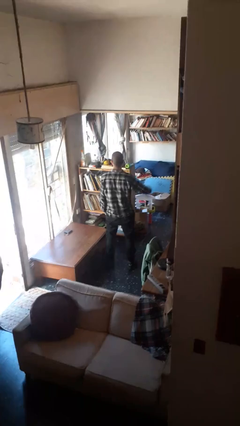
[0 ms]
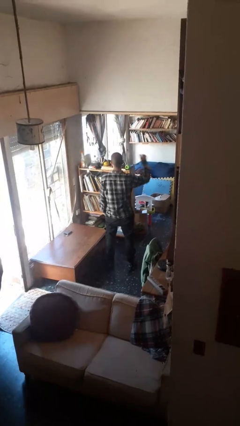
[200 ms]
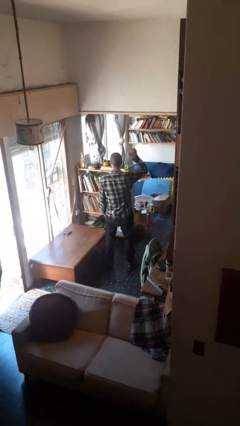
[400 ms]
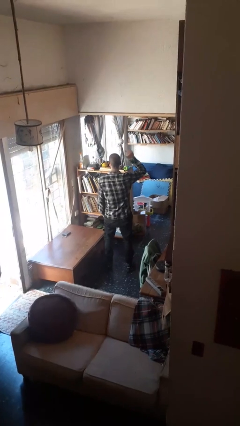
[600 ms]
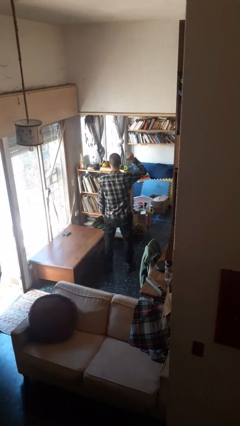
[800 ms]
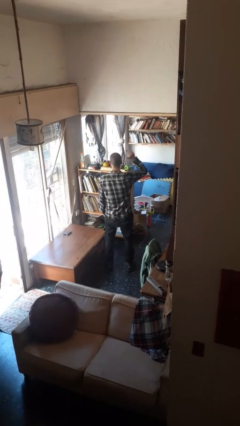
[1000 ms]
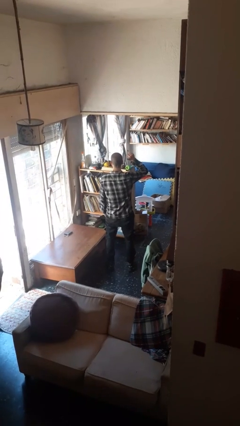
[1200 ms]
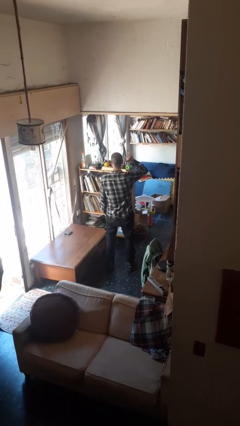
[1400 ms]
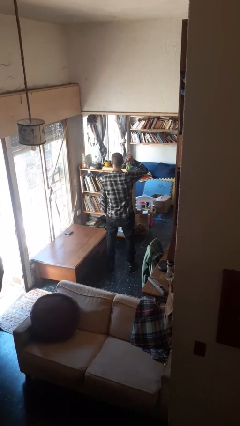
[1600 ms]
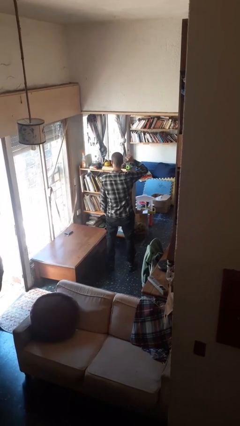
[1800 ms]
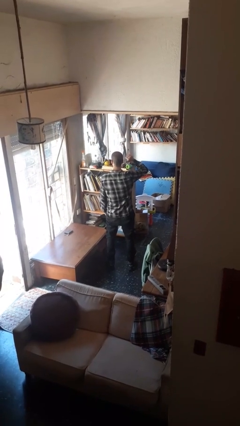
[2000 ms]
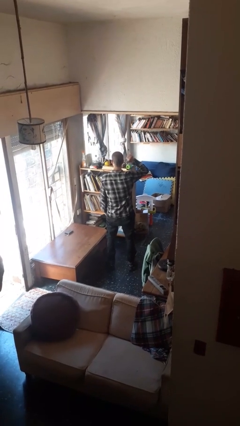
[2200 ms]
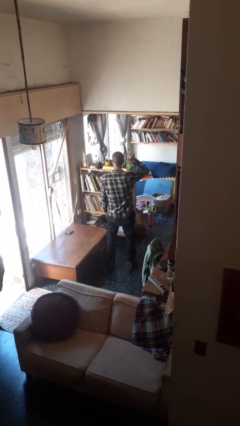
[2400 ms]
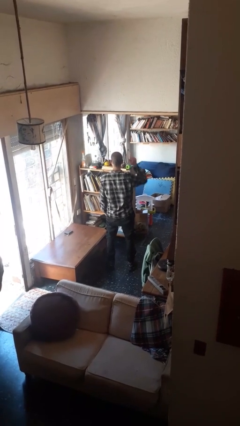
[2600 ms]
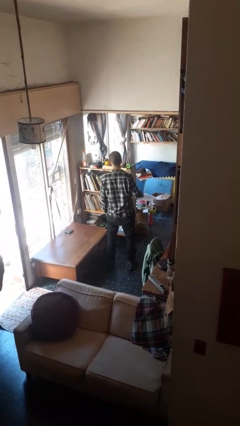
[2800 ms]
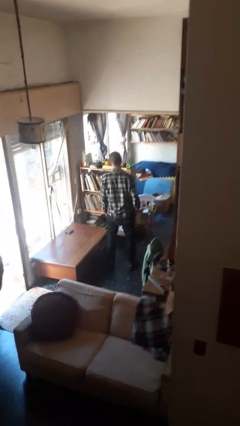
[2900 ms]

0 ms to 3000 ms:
person gestures behind me

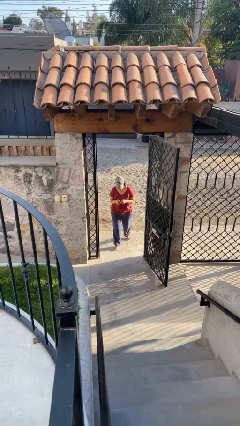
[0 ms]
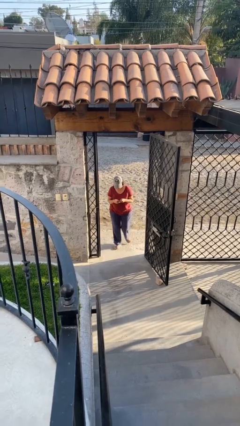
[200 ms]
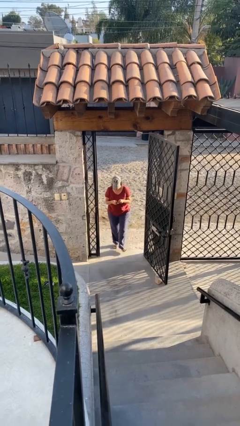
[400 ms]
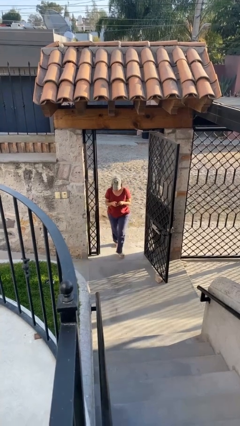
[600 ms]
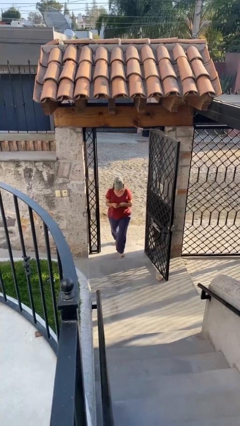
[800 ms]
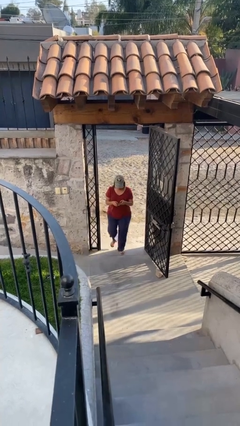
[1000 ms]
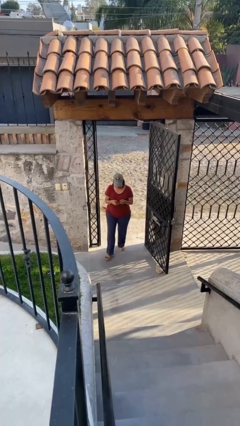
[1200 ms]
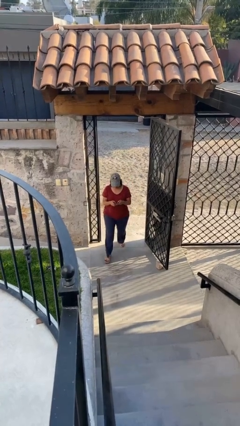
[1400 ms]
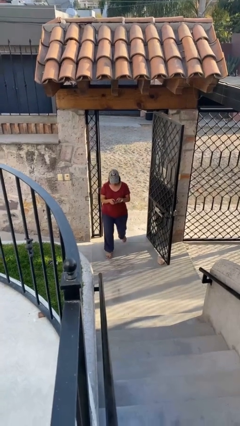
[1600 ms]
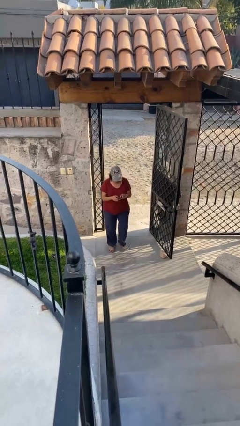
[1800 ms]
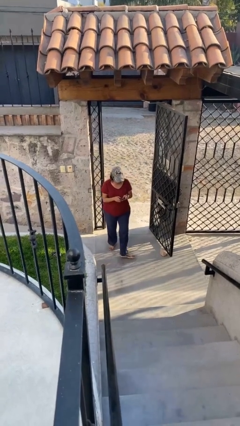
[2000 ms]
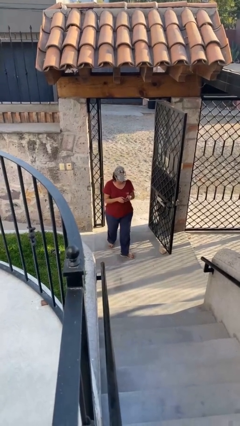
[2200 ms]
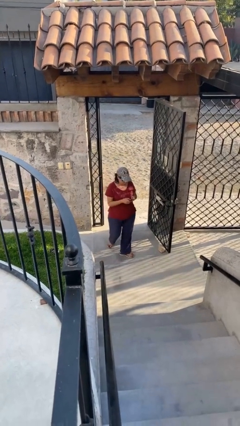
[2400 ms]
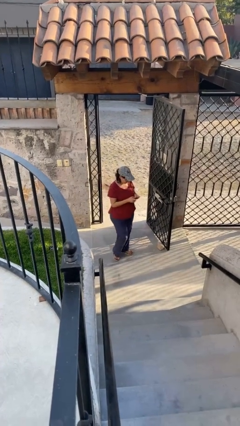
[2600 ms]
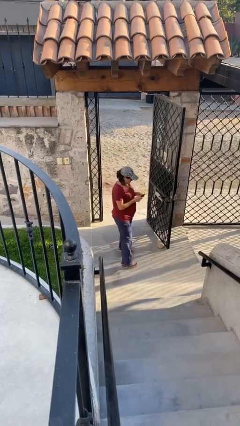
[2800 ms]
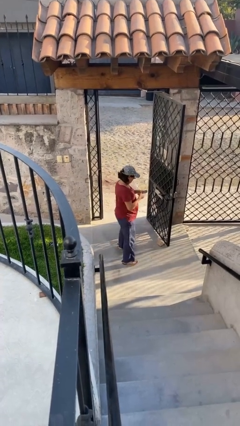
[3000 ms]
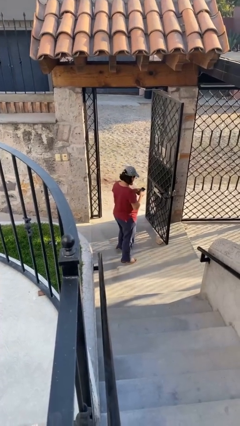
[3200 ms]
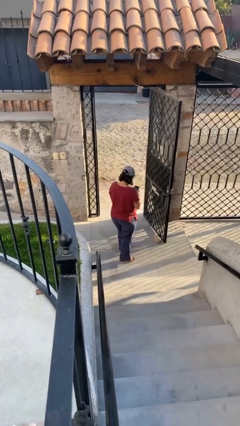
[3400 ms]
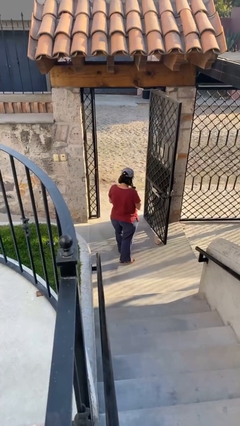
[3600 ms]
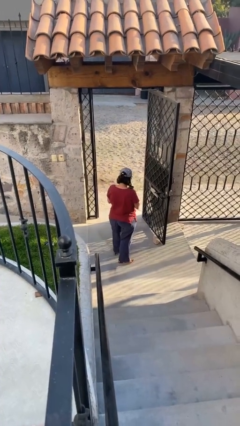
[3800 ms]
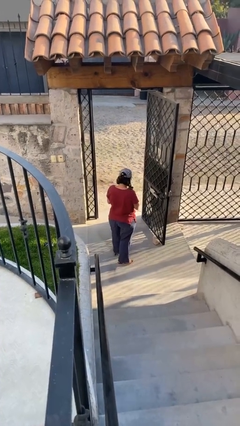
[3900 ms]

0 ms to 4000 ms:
person enters scene through structure

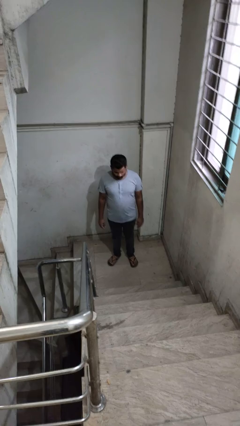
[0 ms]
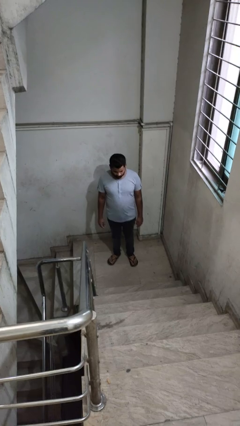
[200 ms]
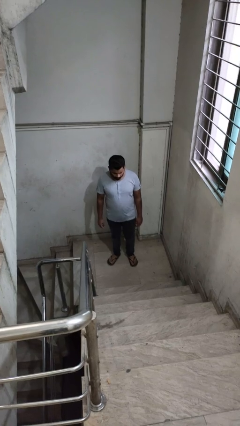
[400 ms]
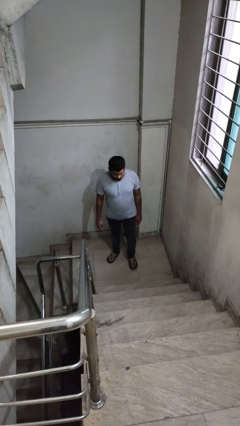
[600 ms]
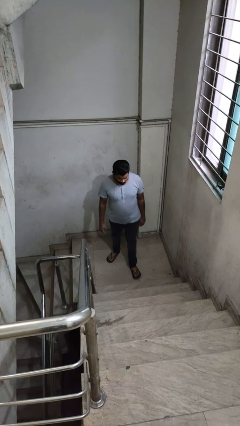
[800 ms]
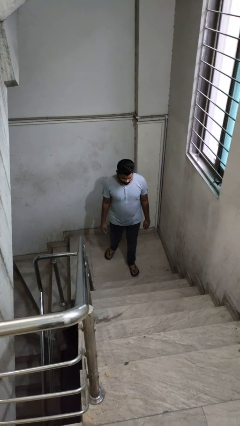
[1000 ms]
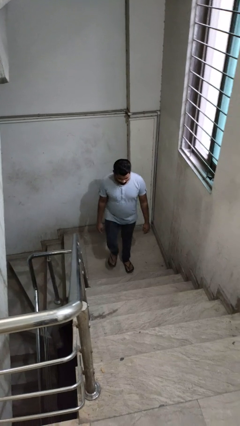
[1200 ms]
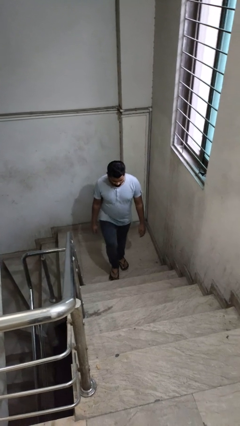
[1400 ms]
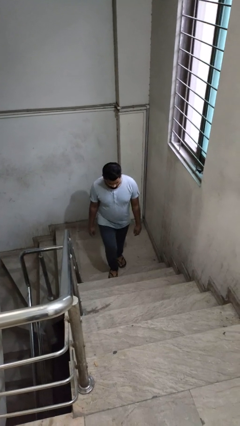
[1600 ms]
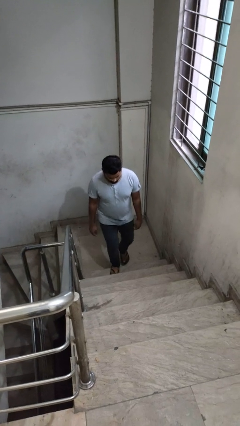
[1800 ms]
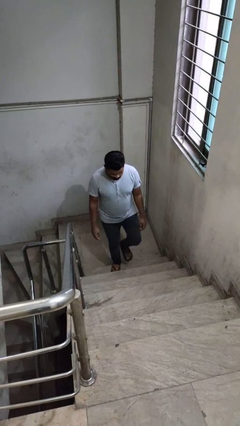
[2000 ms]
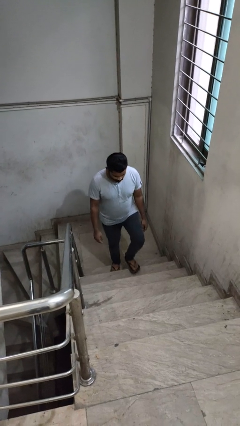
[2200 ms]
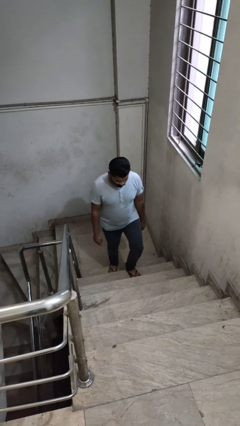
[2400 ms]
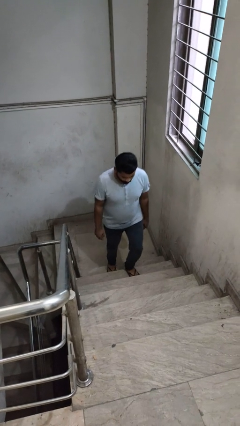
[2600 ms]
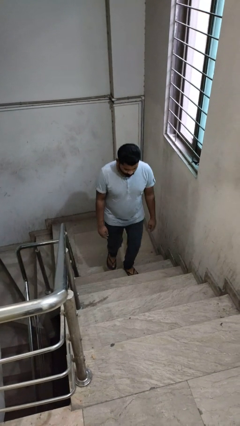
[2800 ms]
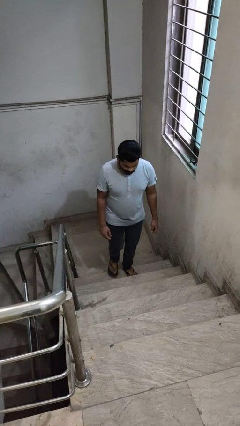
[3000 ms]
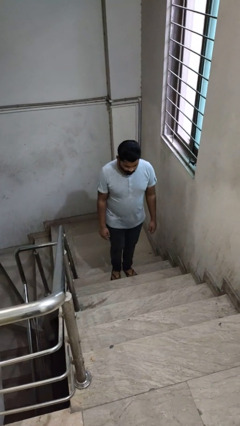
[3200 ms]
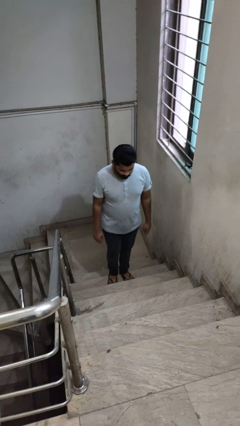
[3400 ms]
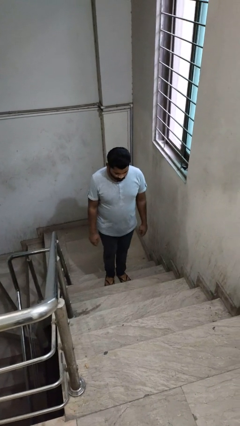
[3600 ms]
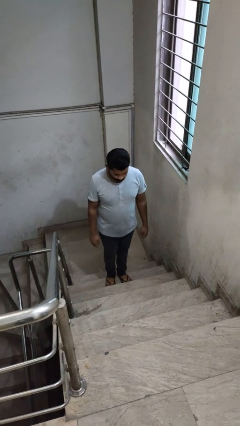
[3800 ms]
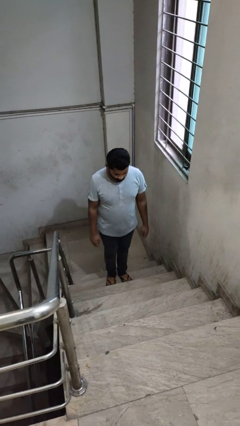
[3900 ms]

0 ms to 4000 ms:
person climbs up stairs

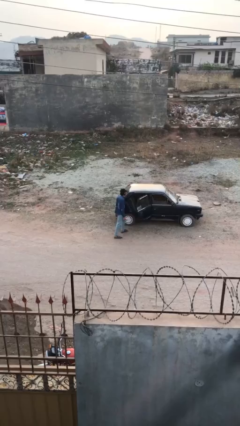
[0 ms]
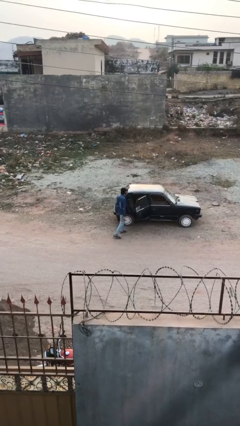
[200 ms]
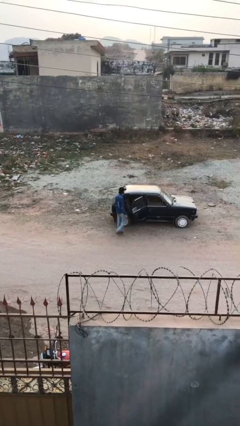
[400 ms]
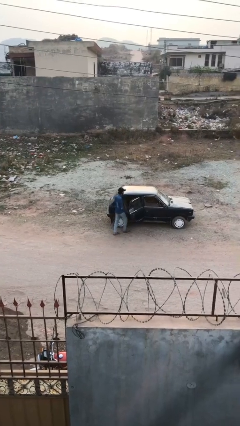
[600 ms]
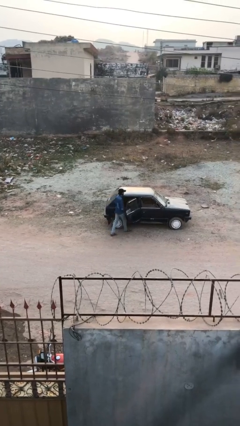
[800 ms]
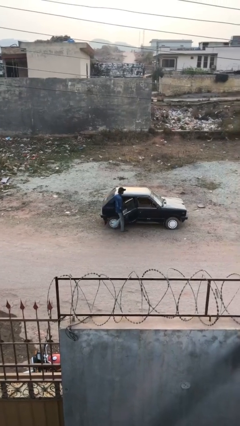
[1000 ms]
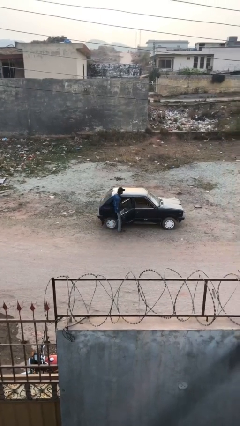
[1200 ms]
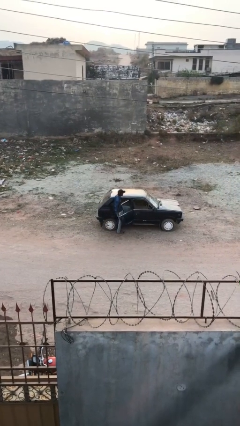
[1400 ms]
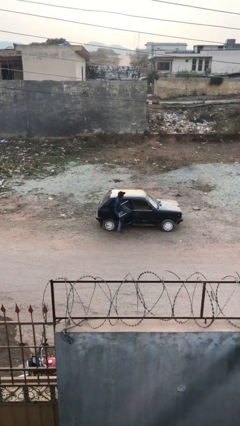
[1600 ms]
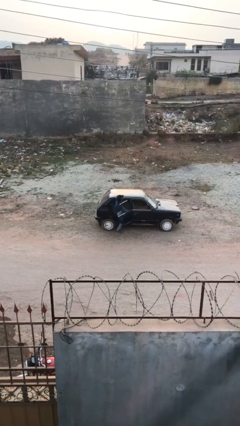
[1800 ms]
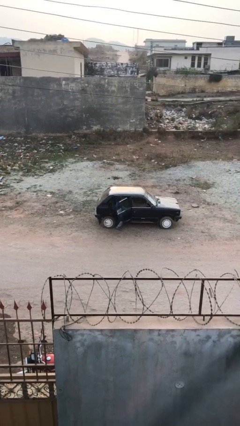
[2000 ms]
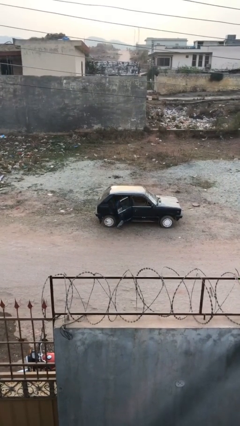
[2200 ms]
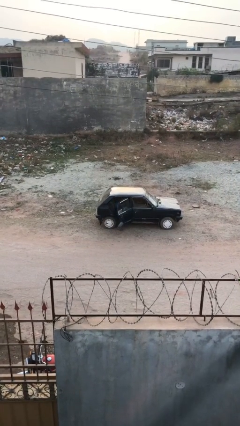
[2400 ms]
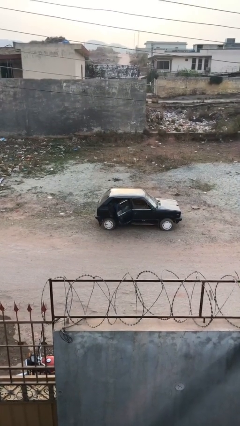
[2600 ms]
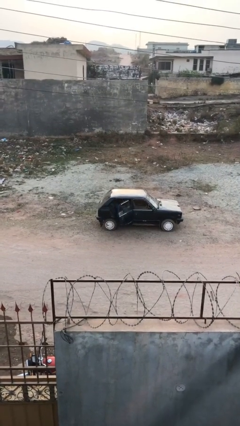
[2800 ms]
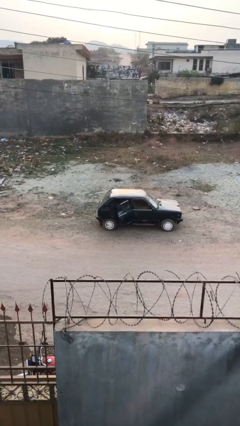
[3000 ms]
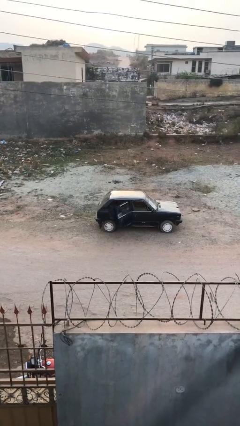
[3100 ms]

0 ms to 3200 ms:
person enters car

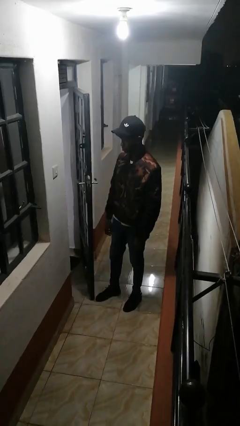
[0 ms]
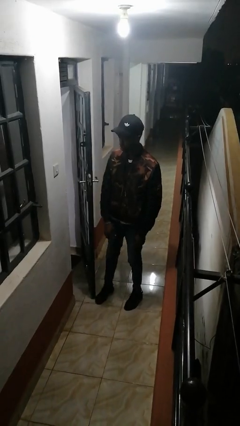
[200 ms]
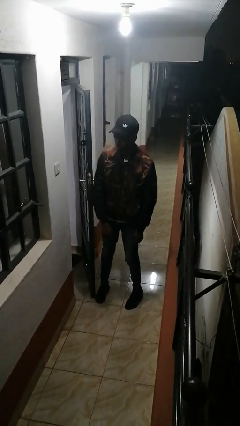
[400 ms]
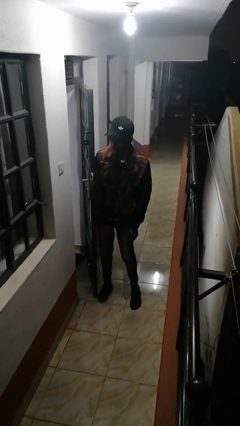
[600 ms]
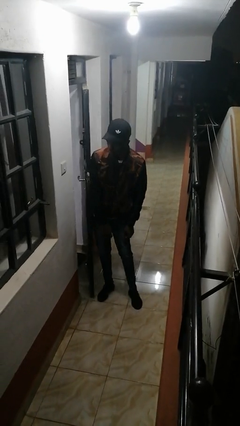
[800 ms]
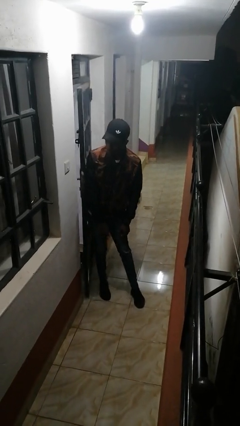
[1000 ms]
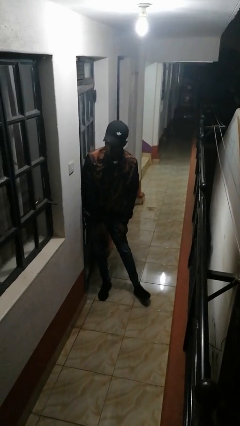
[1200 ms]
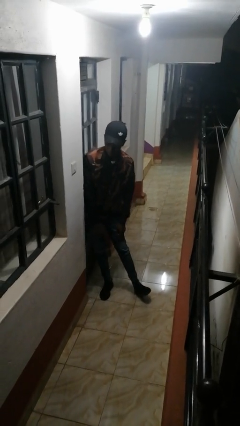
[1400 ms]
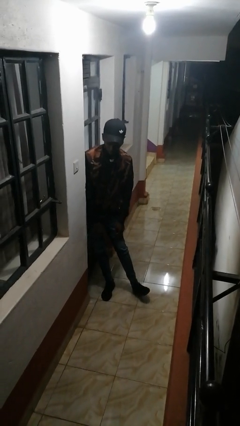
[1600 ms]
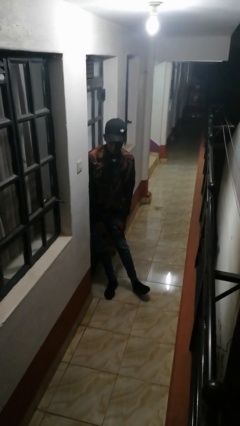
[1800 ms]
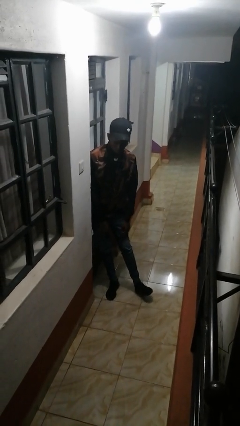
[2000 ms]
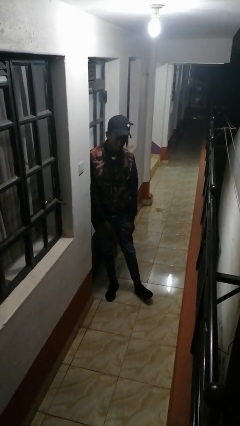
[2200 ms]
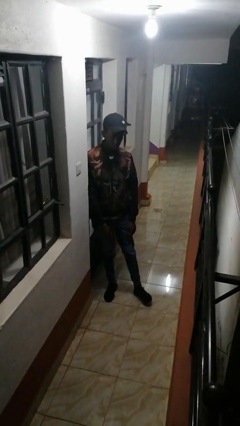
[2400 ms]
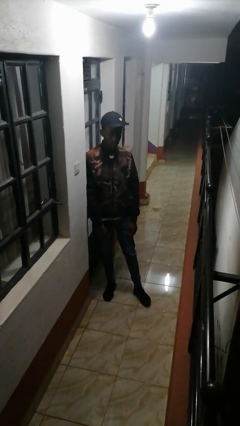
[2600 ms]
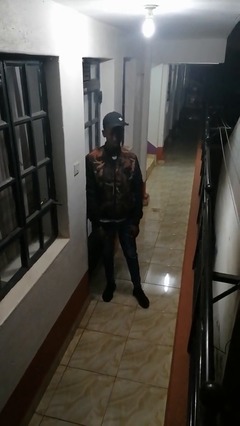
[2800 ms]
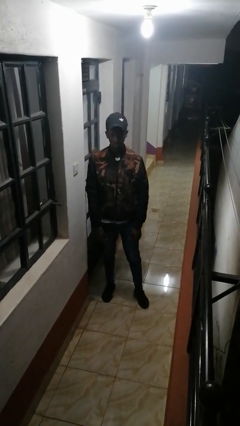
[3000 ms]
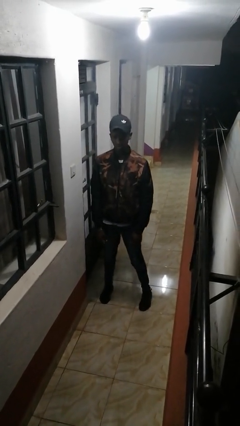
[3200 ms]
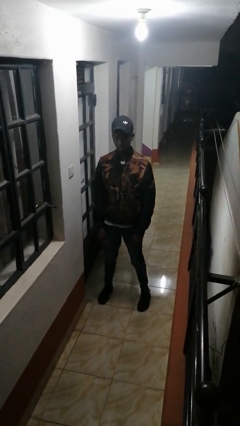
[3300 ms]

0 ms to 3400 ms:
person closes door with hip

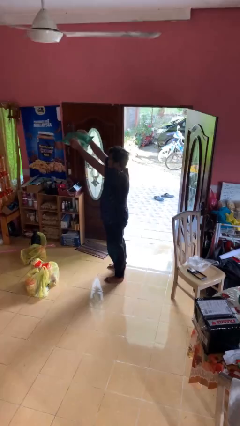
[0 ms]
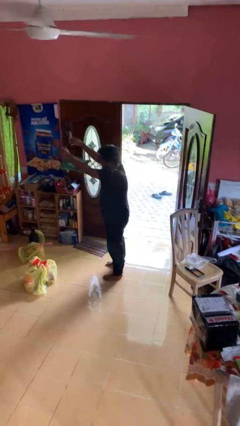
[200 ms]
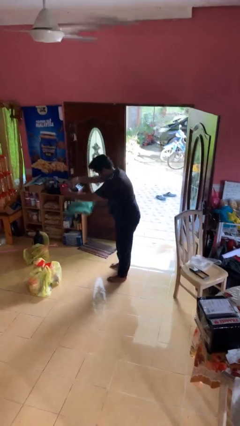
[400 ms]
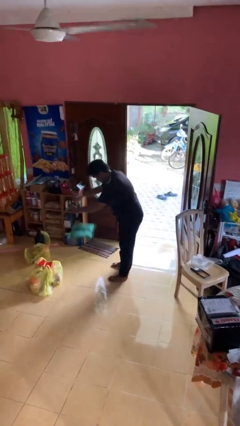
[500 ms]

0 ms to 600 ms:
person drops object
